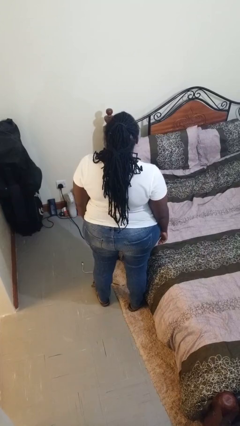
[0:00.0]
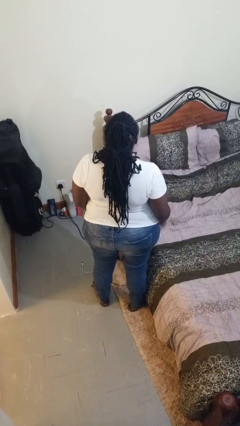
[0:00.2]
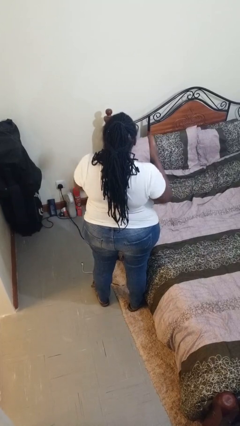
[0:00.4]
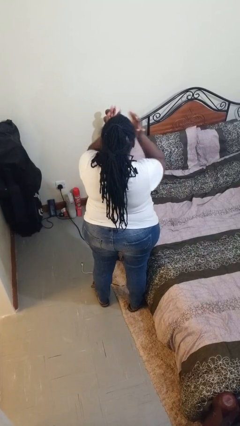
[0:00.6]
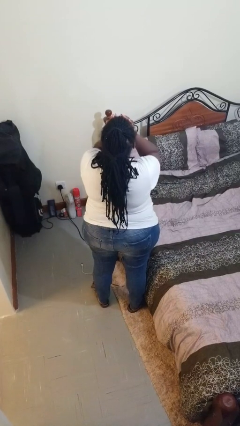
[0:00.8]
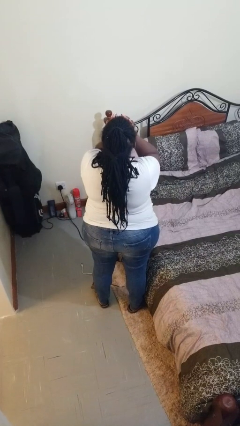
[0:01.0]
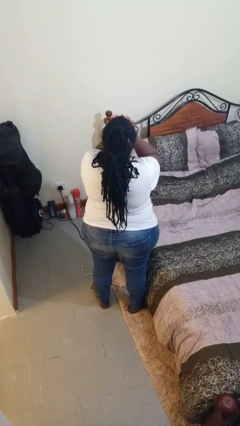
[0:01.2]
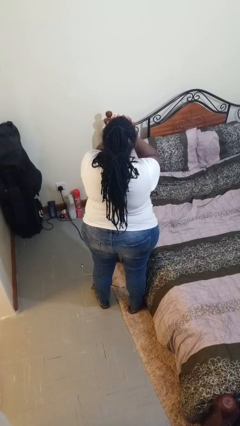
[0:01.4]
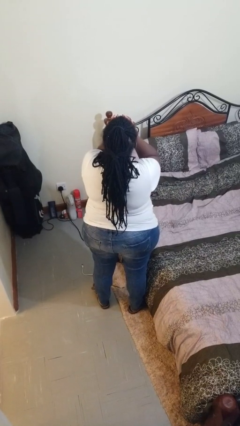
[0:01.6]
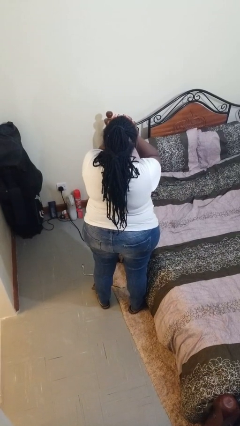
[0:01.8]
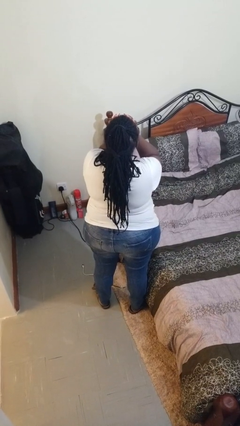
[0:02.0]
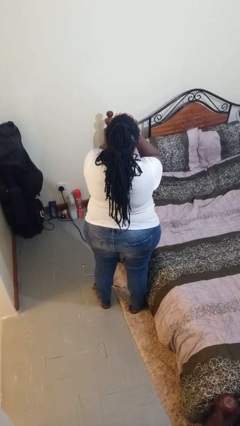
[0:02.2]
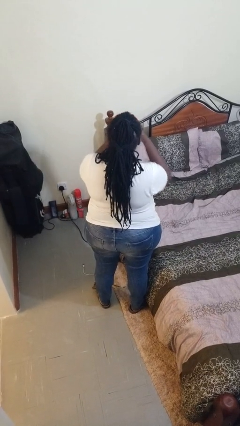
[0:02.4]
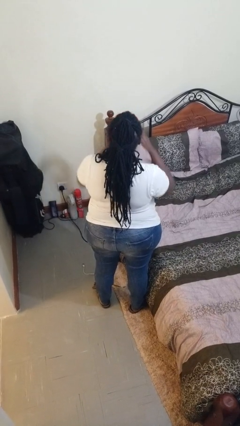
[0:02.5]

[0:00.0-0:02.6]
person covers face with hands

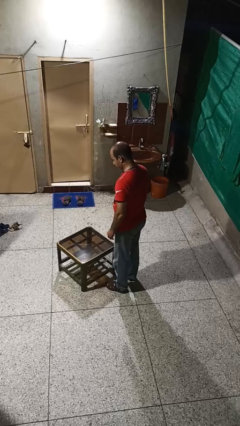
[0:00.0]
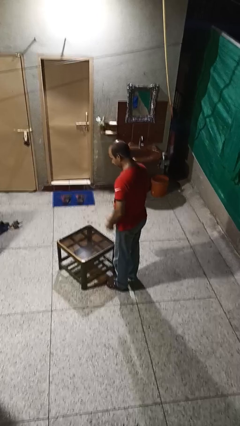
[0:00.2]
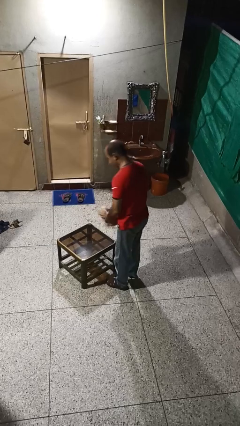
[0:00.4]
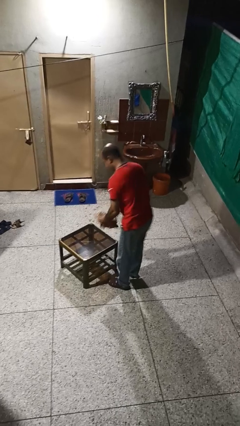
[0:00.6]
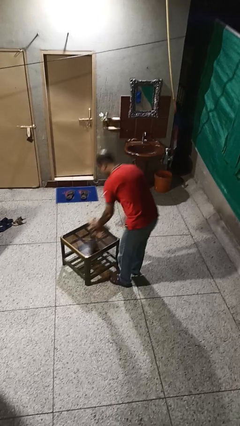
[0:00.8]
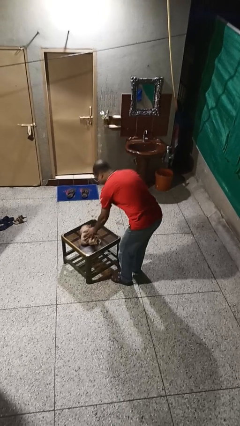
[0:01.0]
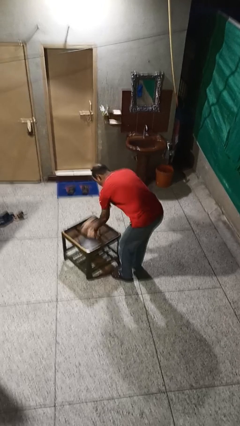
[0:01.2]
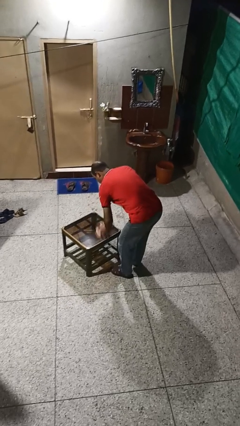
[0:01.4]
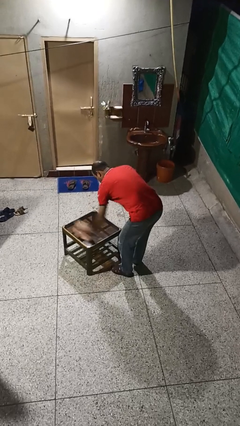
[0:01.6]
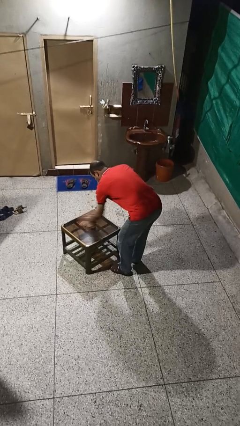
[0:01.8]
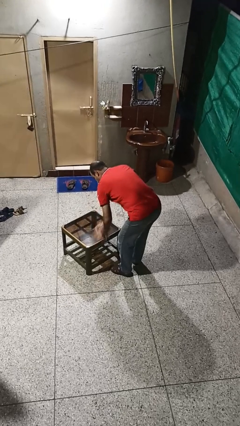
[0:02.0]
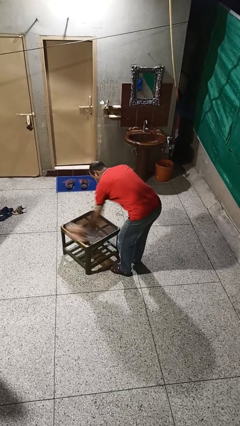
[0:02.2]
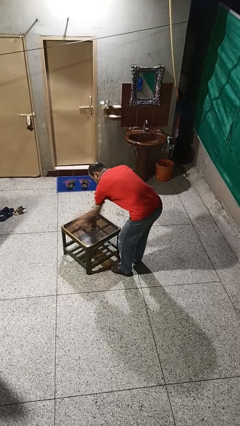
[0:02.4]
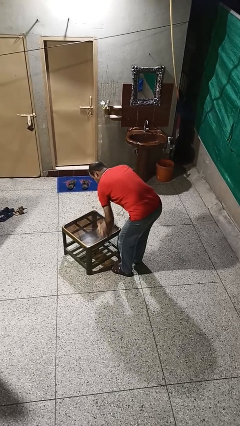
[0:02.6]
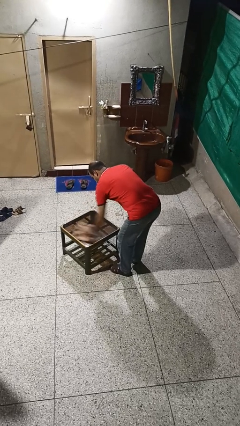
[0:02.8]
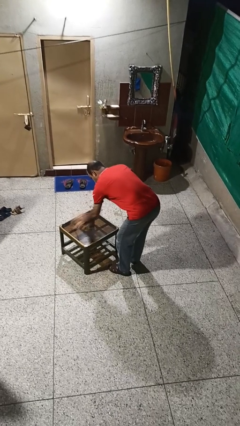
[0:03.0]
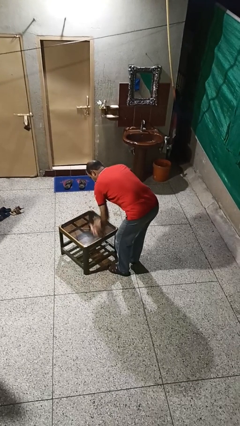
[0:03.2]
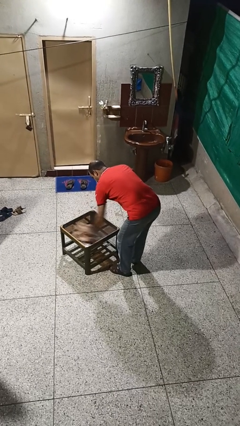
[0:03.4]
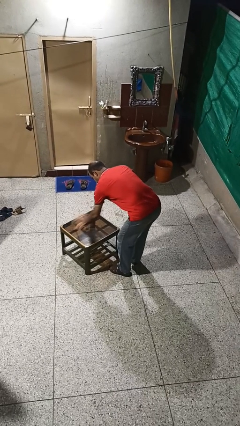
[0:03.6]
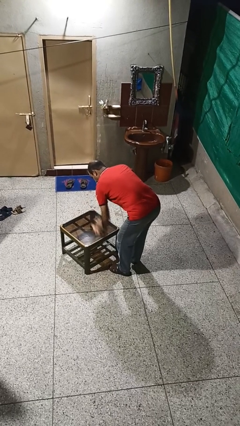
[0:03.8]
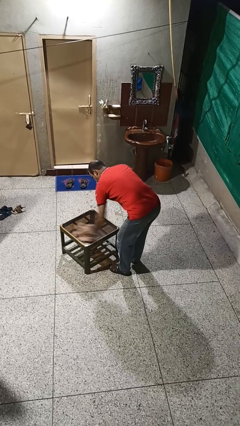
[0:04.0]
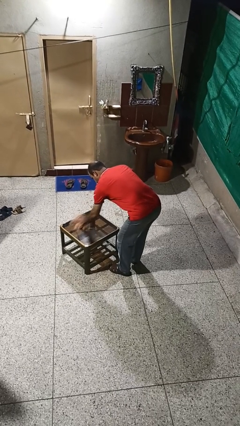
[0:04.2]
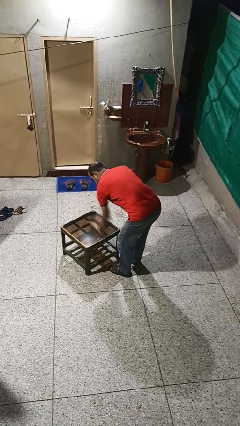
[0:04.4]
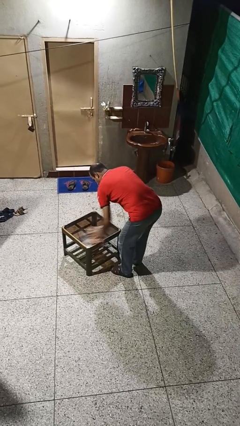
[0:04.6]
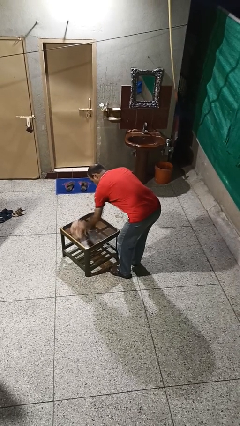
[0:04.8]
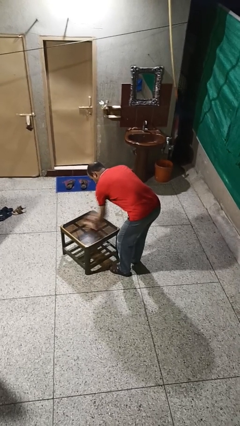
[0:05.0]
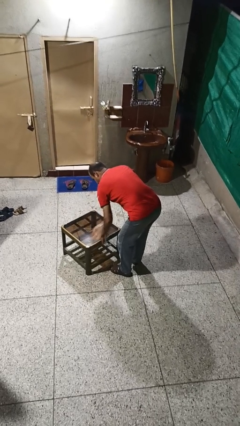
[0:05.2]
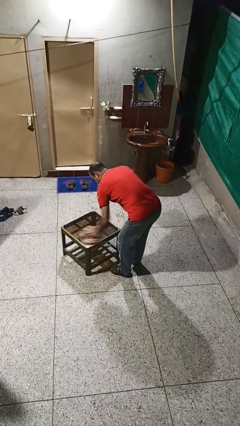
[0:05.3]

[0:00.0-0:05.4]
person cleans table with rag

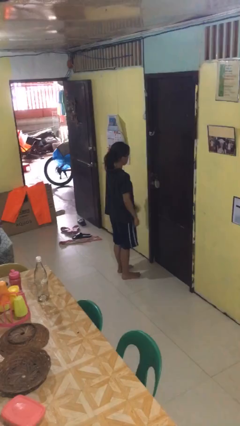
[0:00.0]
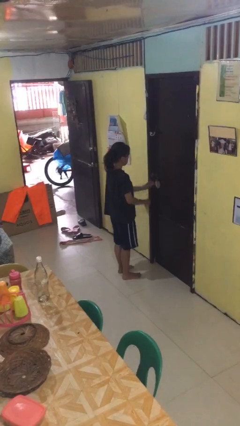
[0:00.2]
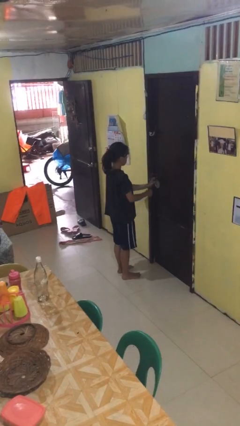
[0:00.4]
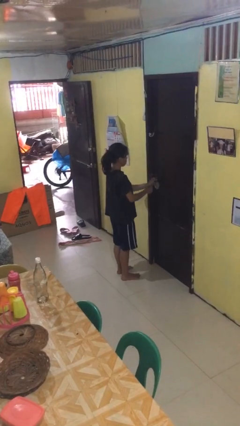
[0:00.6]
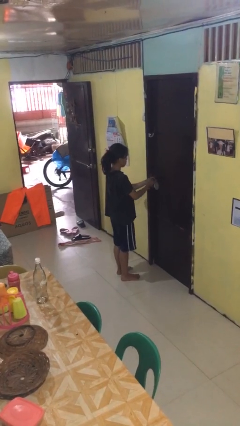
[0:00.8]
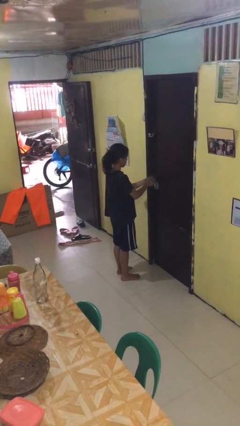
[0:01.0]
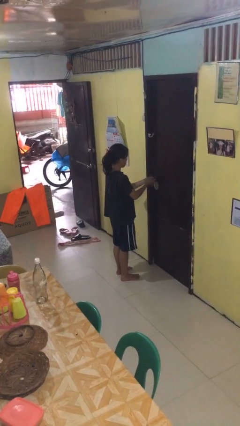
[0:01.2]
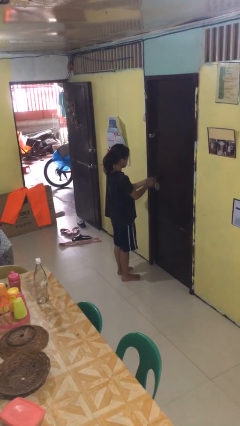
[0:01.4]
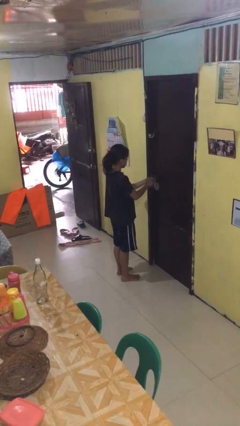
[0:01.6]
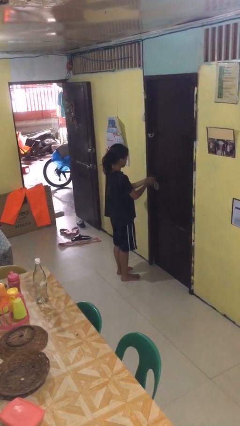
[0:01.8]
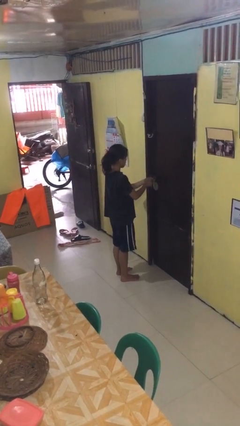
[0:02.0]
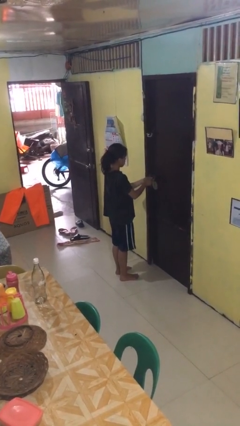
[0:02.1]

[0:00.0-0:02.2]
person unlocks door with keys

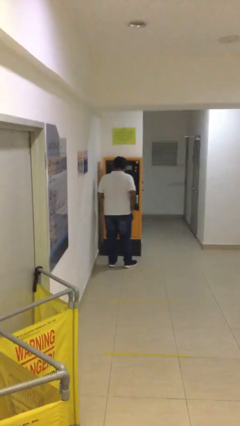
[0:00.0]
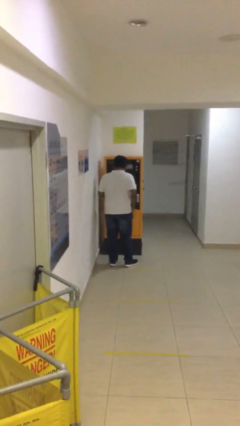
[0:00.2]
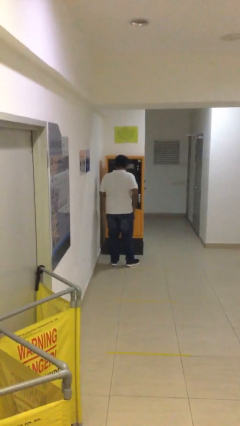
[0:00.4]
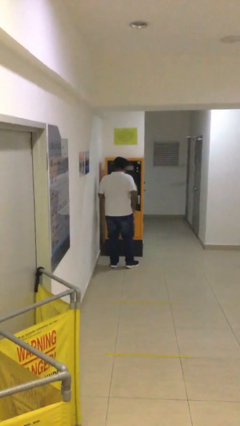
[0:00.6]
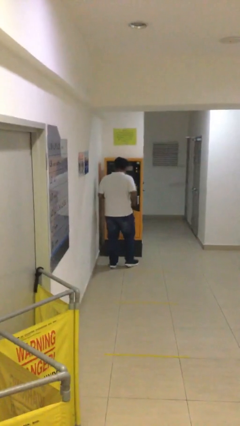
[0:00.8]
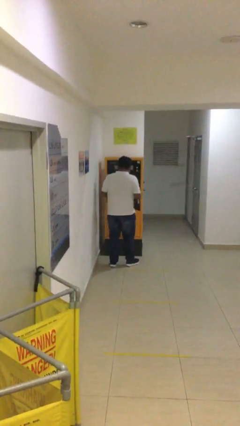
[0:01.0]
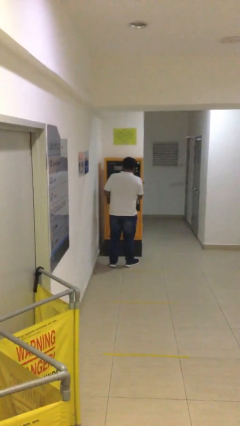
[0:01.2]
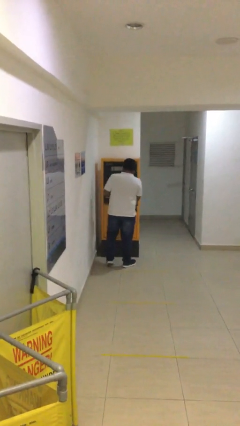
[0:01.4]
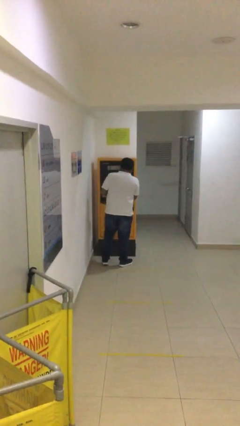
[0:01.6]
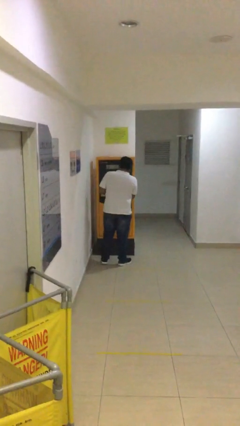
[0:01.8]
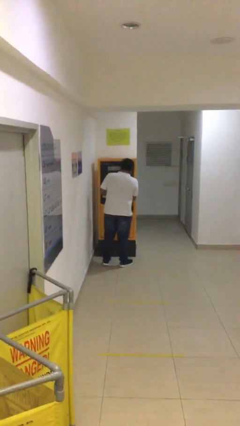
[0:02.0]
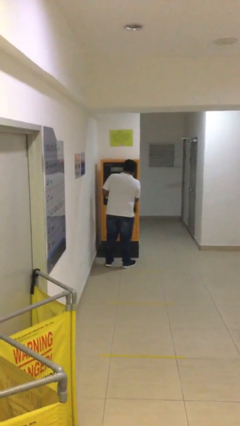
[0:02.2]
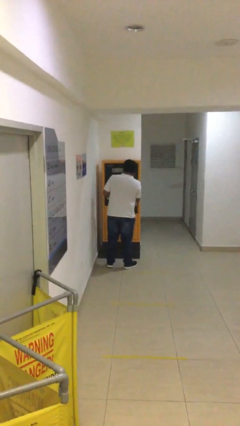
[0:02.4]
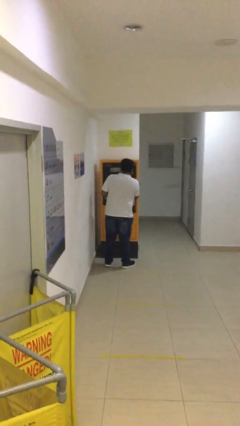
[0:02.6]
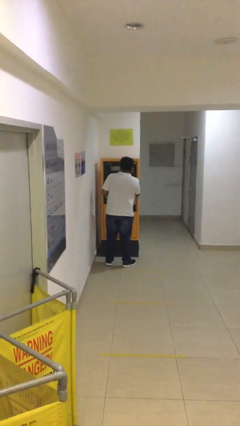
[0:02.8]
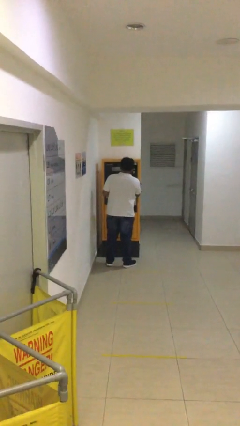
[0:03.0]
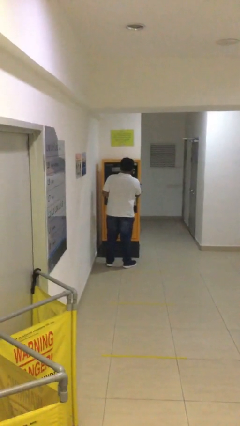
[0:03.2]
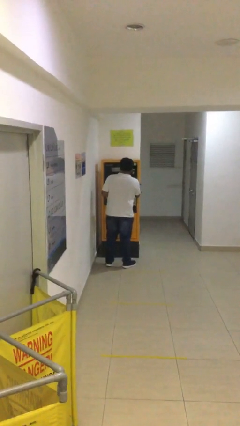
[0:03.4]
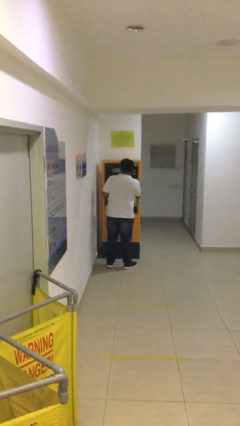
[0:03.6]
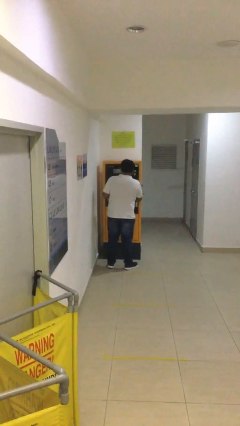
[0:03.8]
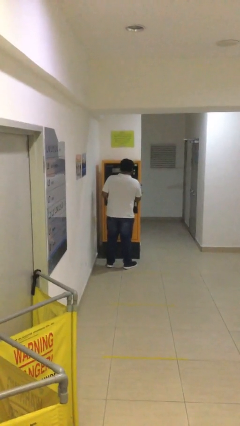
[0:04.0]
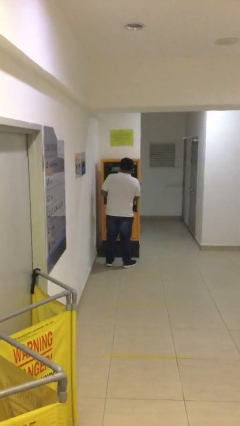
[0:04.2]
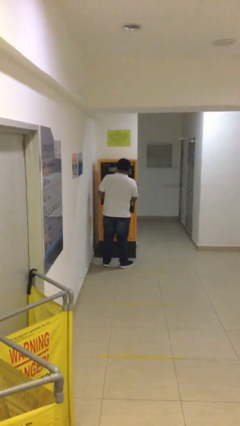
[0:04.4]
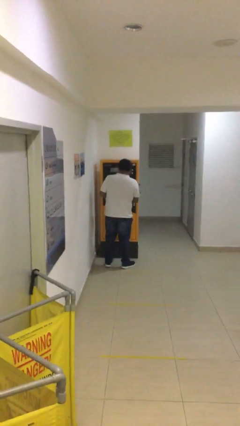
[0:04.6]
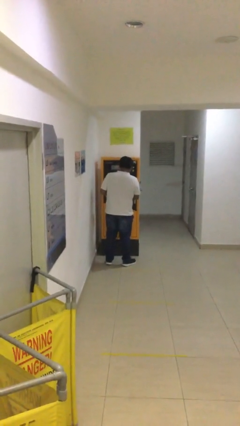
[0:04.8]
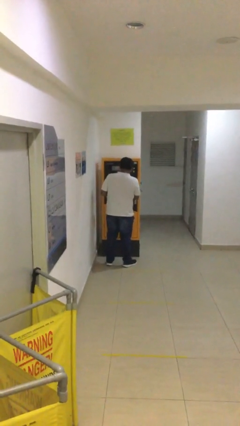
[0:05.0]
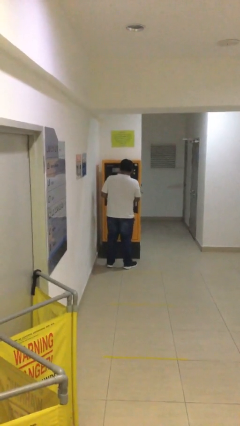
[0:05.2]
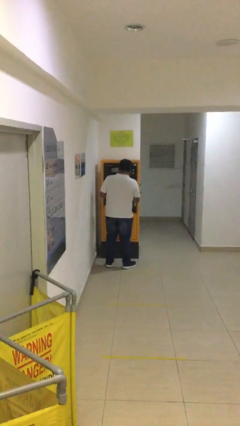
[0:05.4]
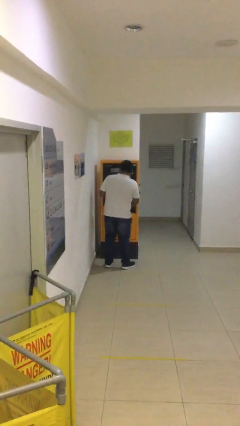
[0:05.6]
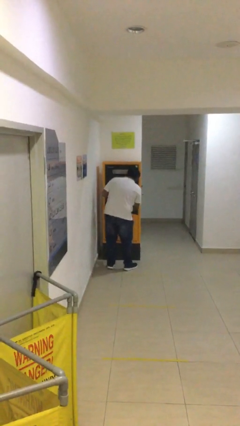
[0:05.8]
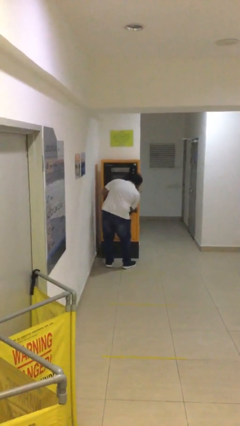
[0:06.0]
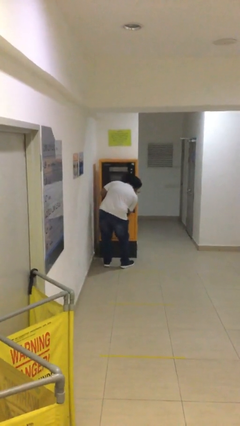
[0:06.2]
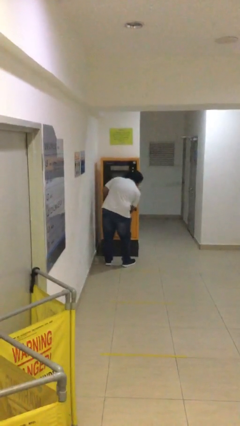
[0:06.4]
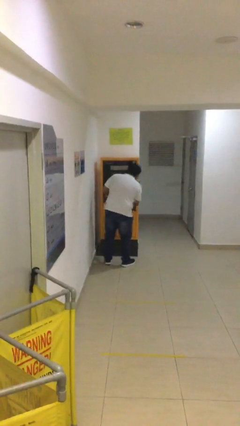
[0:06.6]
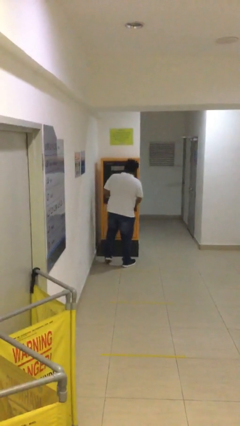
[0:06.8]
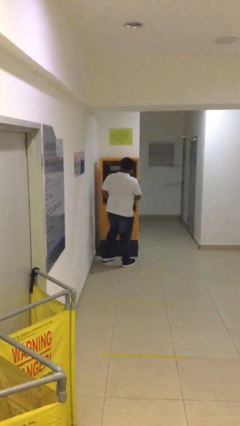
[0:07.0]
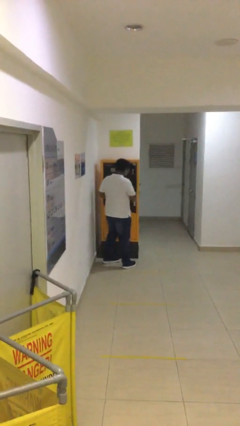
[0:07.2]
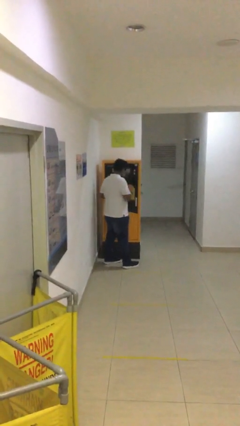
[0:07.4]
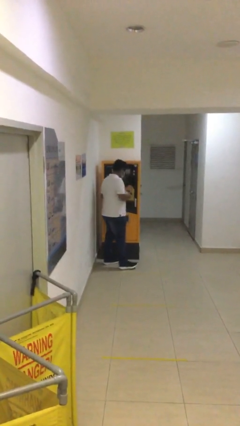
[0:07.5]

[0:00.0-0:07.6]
person purchases from machine
